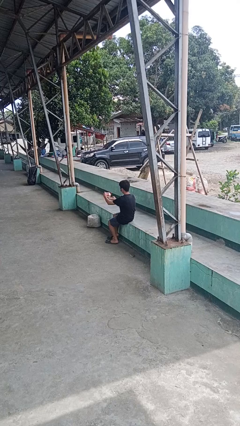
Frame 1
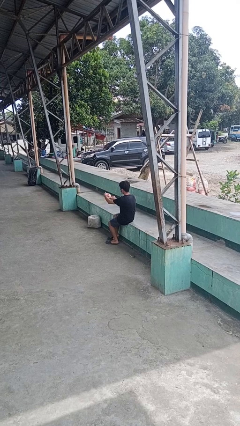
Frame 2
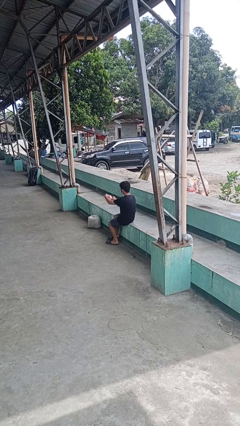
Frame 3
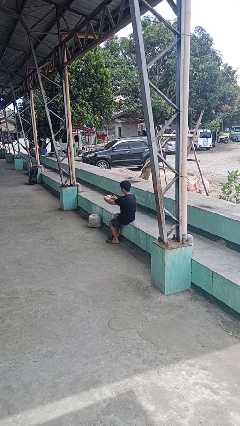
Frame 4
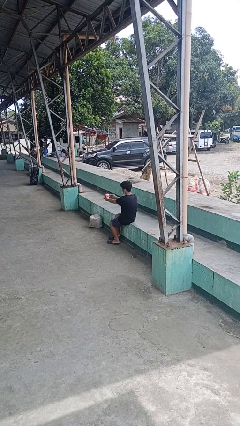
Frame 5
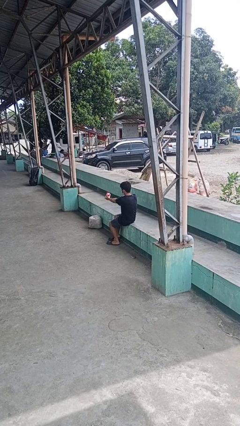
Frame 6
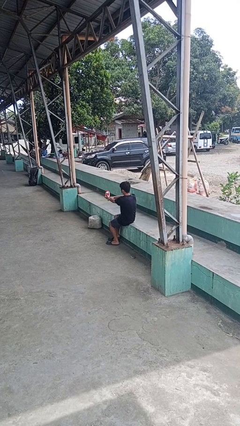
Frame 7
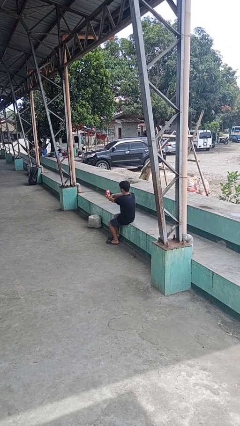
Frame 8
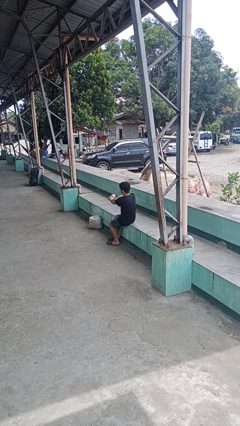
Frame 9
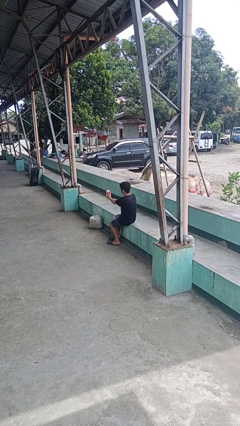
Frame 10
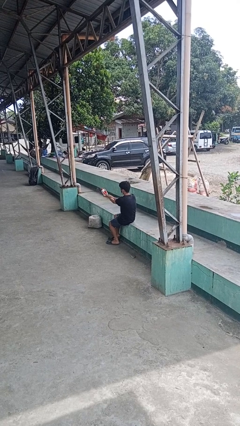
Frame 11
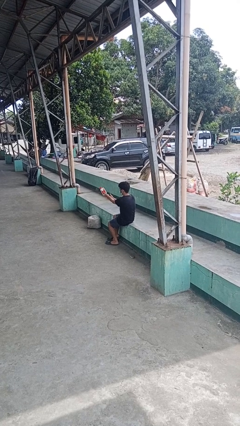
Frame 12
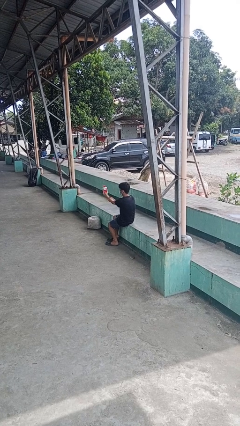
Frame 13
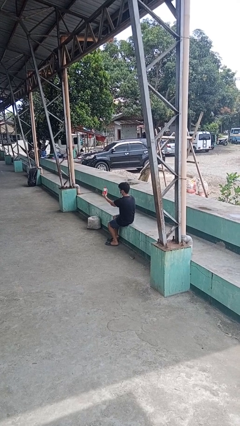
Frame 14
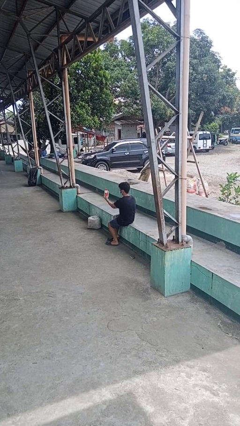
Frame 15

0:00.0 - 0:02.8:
person applies sunscreen

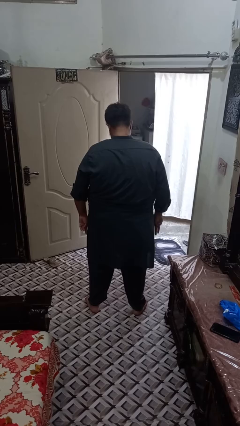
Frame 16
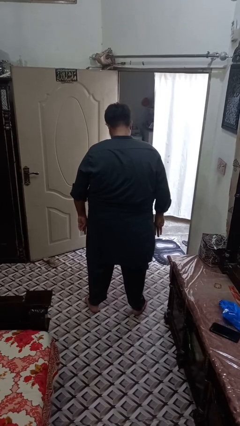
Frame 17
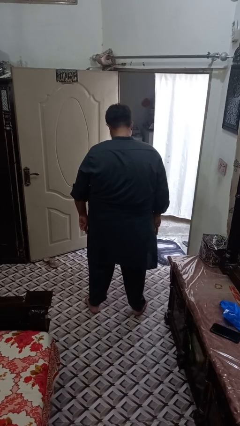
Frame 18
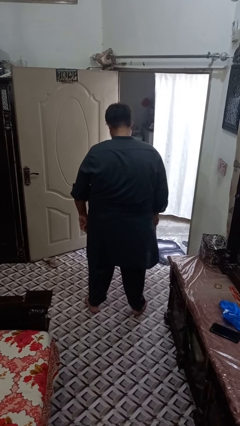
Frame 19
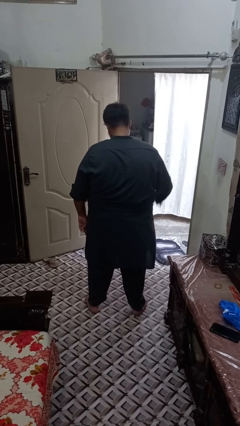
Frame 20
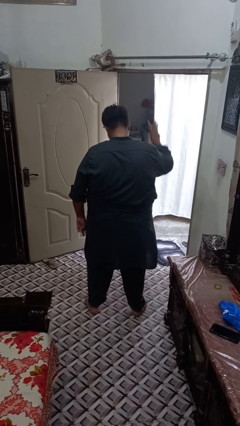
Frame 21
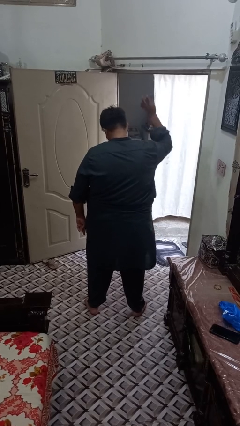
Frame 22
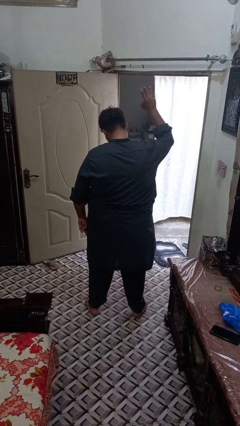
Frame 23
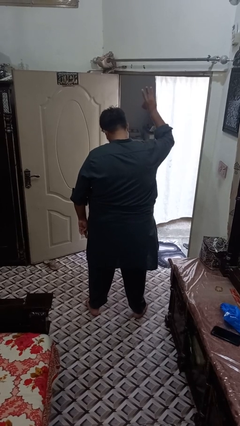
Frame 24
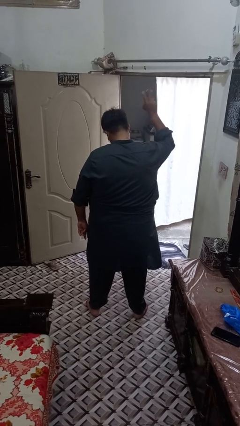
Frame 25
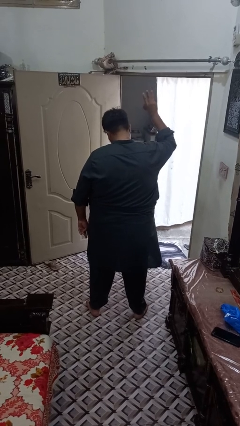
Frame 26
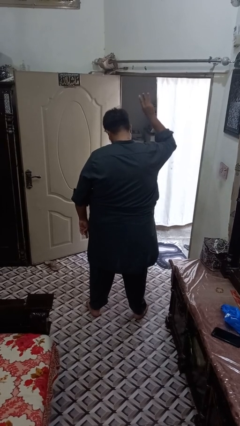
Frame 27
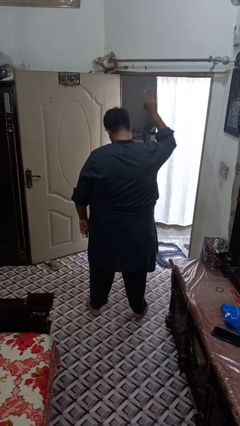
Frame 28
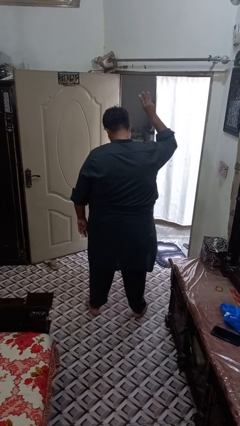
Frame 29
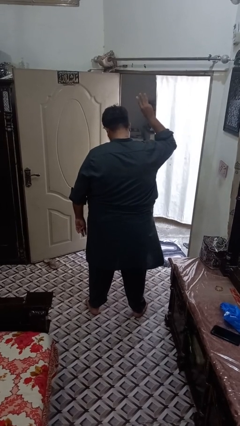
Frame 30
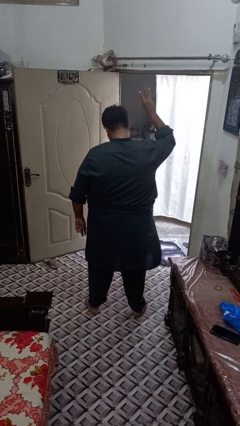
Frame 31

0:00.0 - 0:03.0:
person gestures number three

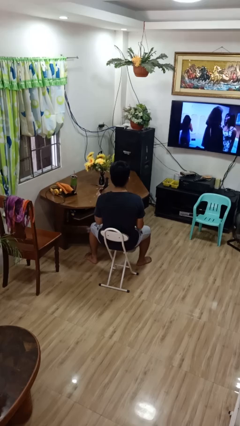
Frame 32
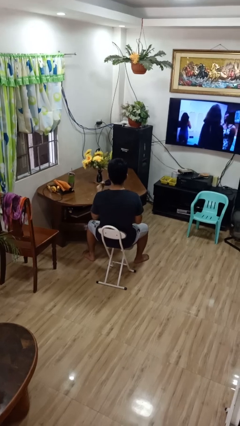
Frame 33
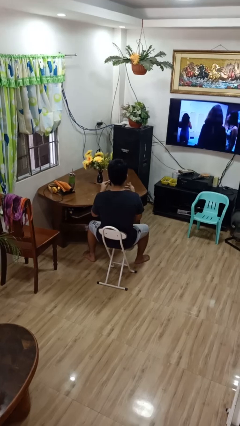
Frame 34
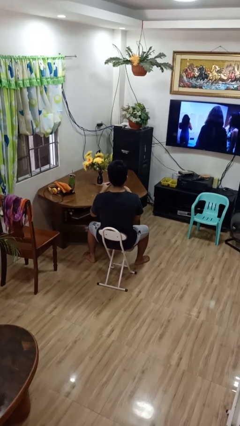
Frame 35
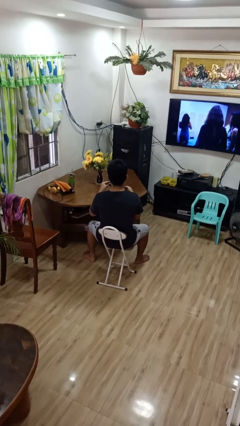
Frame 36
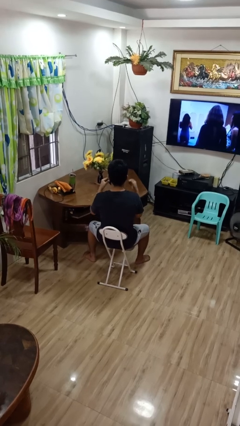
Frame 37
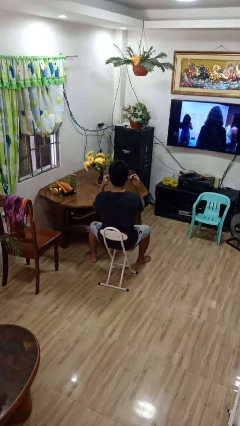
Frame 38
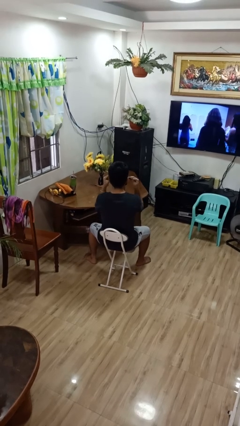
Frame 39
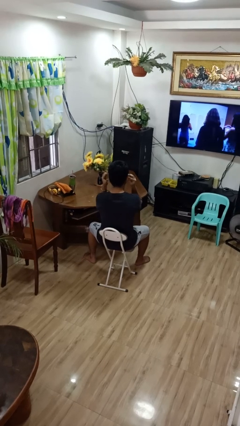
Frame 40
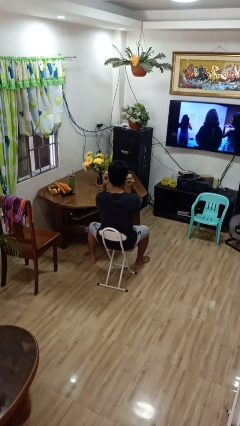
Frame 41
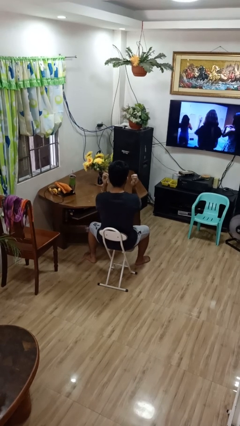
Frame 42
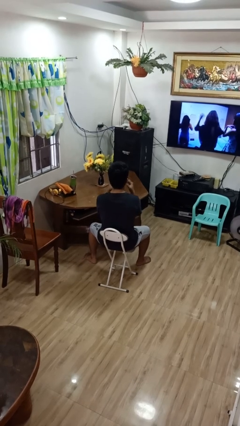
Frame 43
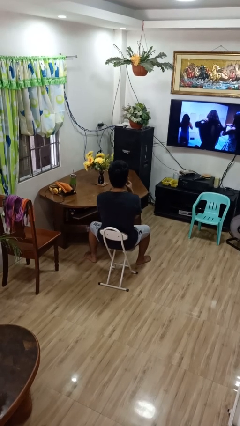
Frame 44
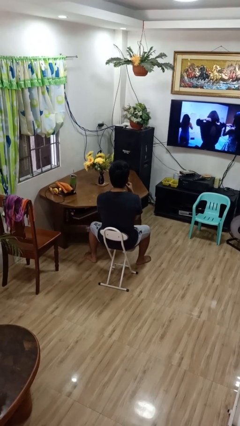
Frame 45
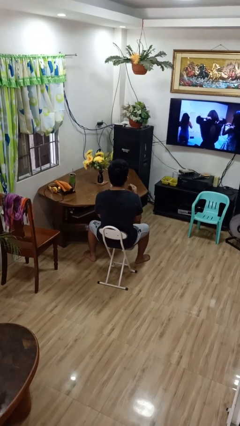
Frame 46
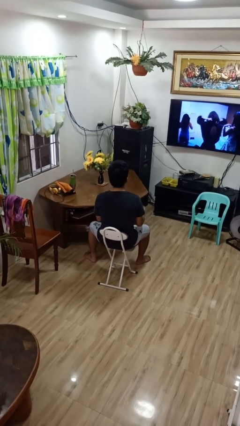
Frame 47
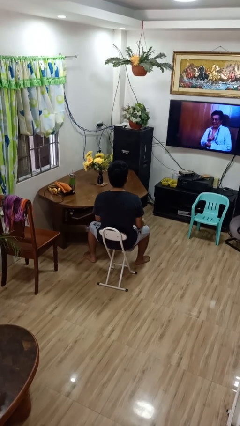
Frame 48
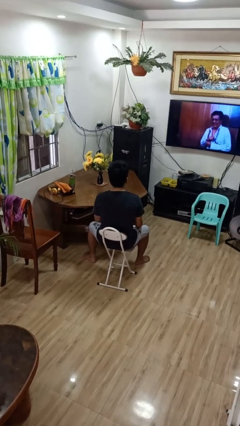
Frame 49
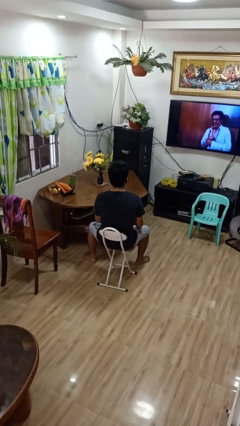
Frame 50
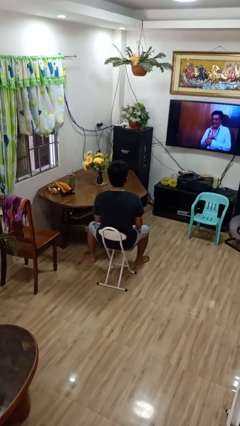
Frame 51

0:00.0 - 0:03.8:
person puts on facemask

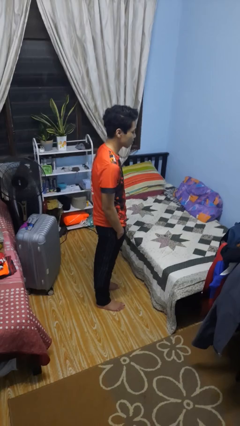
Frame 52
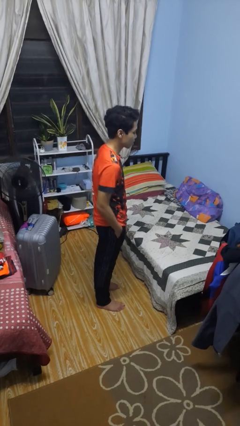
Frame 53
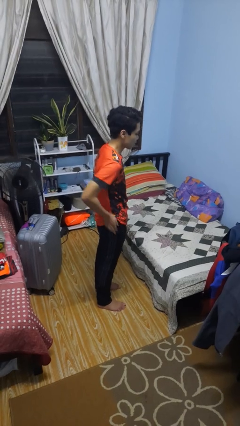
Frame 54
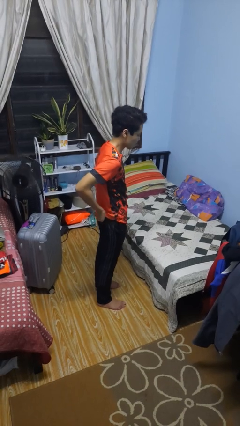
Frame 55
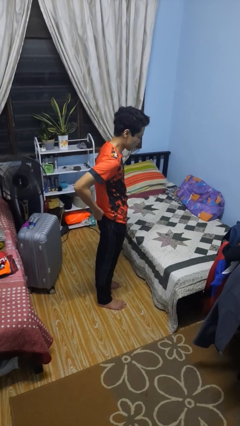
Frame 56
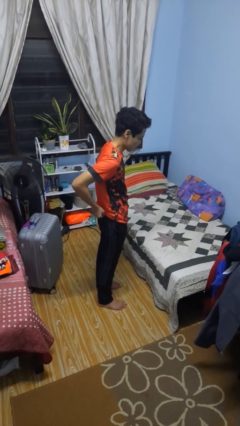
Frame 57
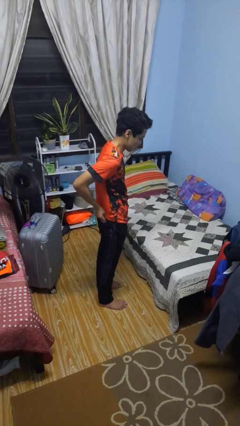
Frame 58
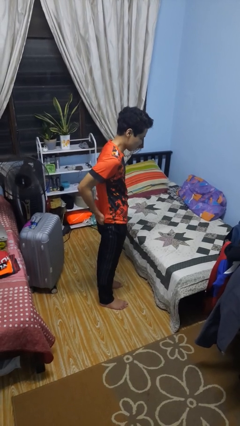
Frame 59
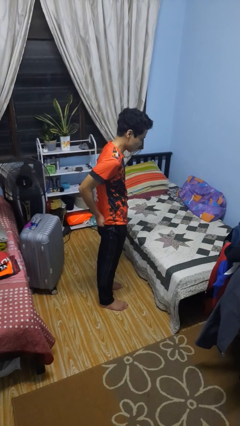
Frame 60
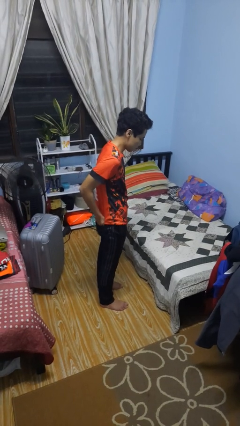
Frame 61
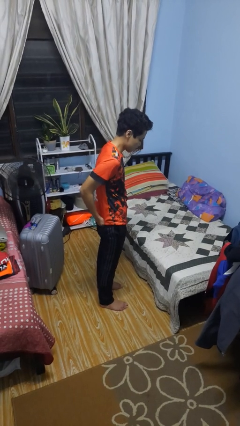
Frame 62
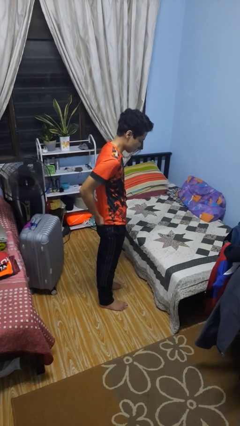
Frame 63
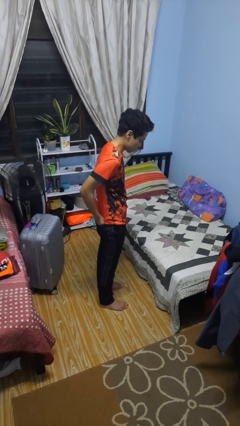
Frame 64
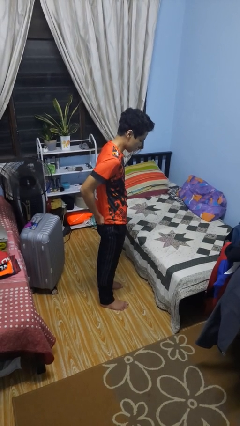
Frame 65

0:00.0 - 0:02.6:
person puts hands in back pockets

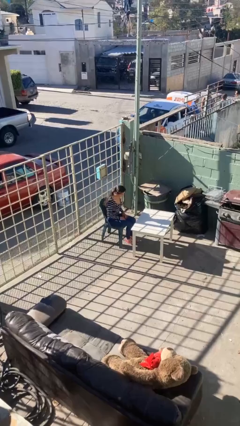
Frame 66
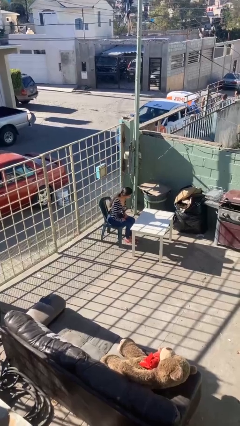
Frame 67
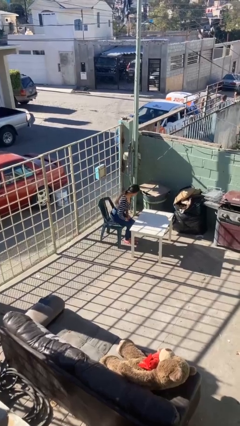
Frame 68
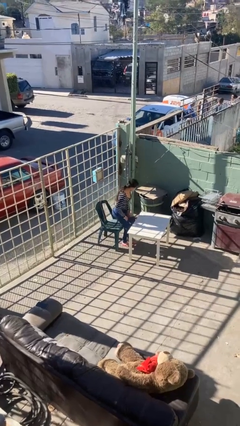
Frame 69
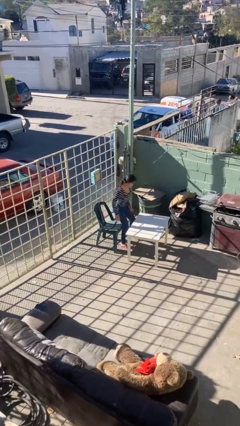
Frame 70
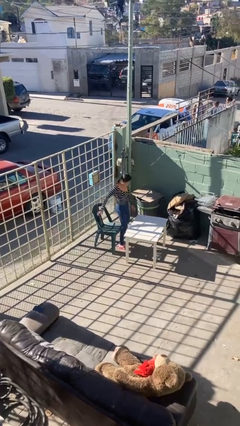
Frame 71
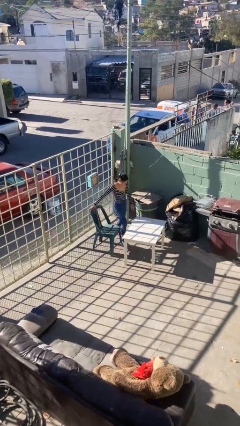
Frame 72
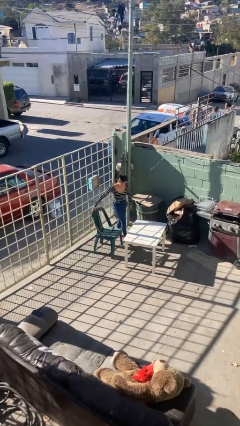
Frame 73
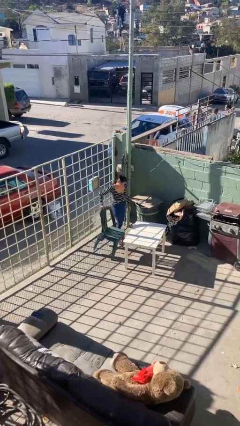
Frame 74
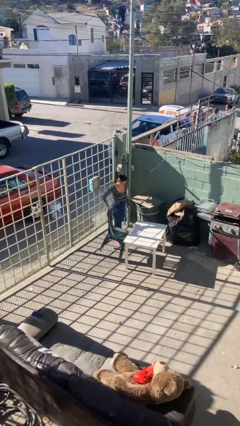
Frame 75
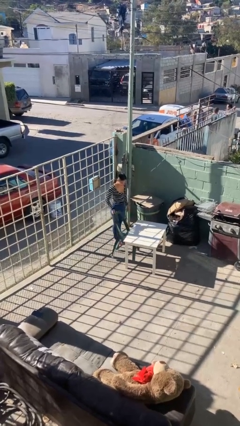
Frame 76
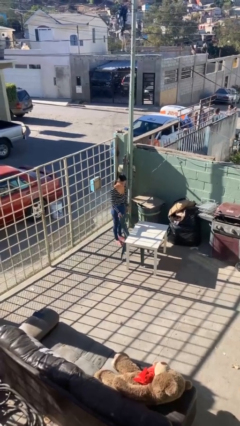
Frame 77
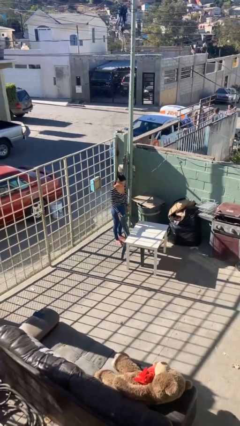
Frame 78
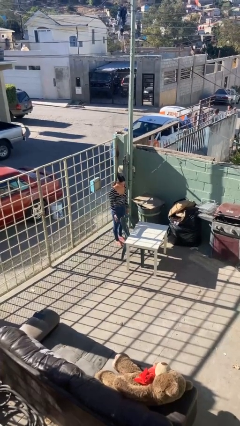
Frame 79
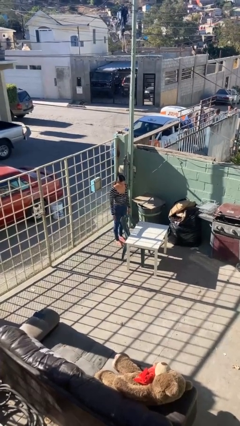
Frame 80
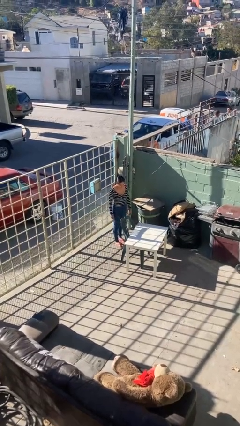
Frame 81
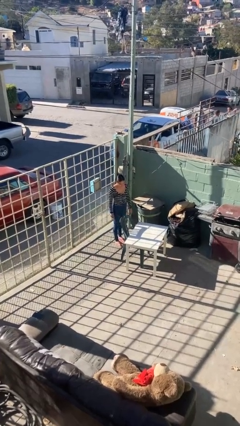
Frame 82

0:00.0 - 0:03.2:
person stands up

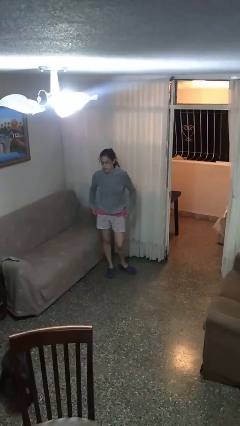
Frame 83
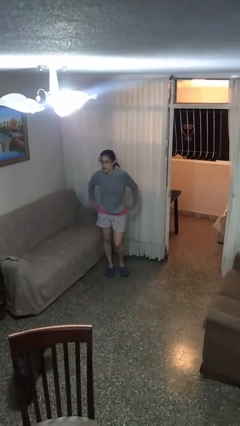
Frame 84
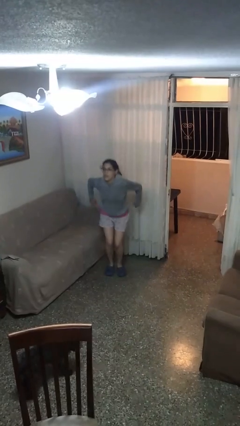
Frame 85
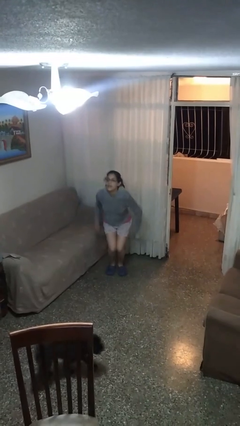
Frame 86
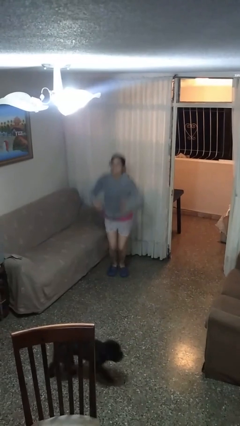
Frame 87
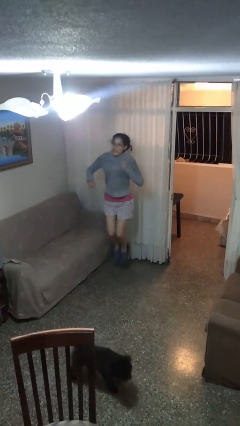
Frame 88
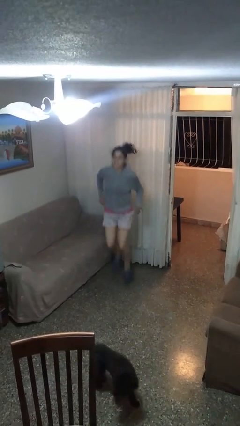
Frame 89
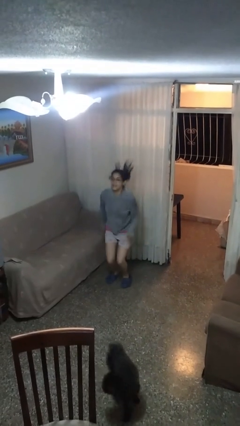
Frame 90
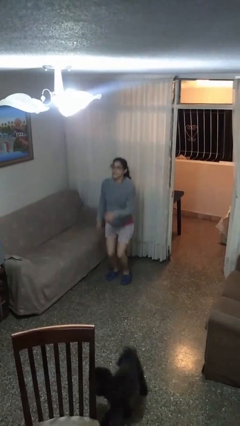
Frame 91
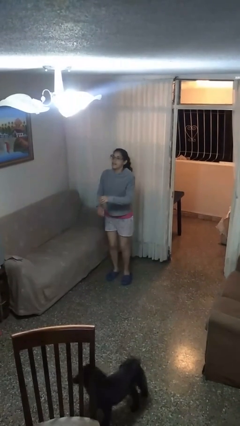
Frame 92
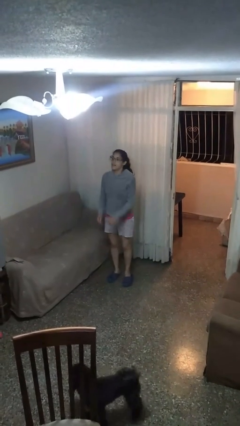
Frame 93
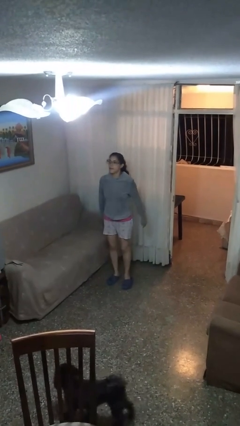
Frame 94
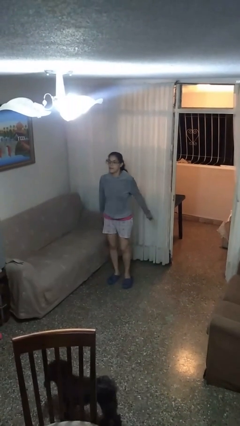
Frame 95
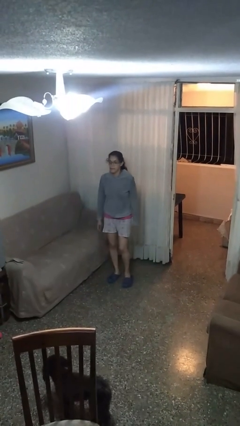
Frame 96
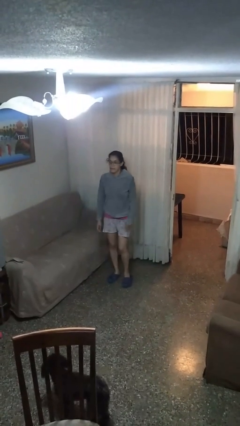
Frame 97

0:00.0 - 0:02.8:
person jumps
